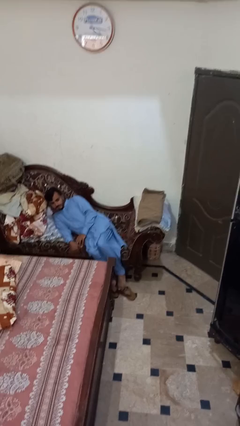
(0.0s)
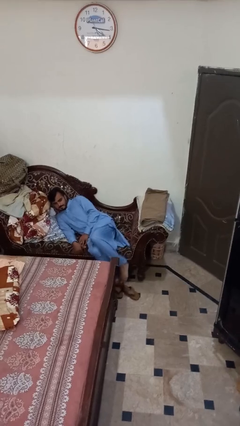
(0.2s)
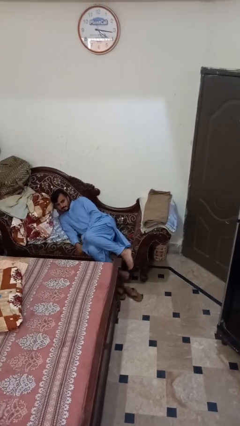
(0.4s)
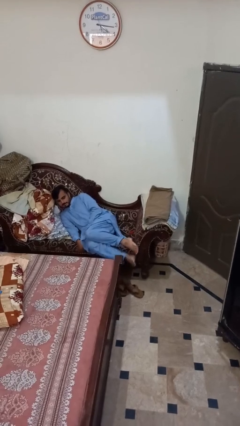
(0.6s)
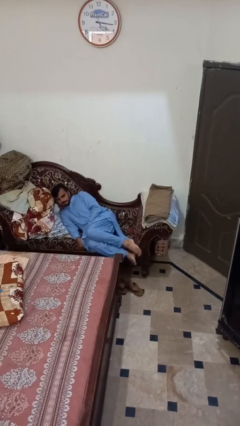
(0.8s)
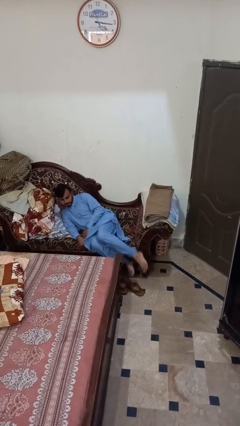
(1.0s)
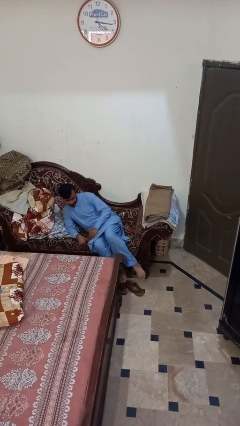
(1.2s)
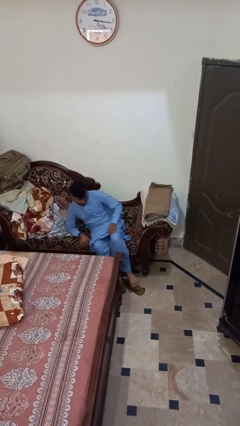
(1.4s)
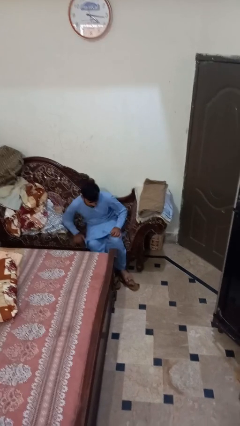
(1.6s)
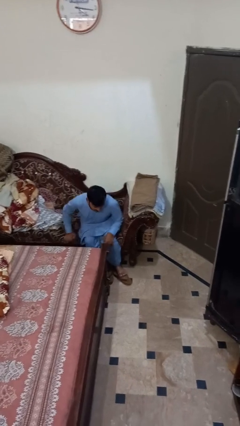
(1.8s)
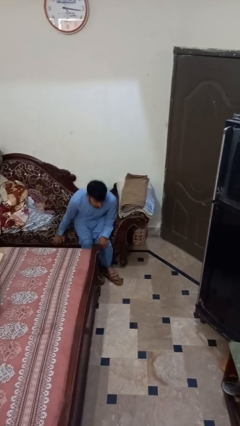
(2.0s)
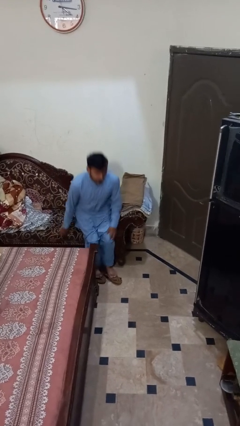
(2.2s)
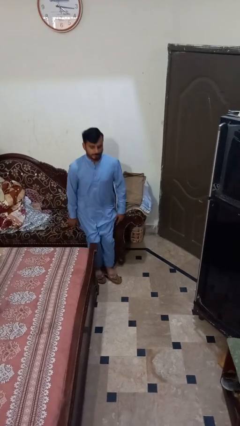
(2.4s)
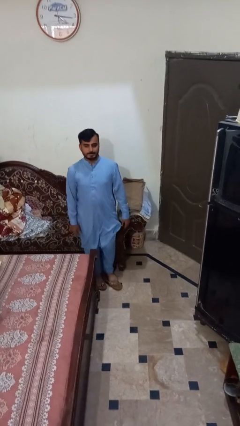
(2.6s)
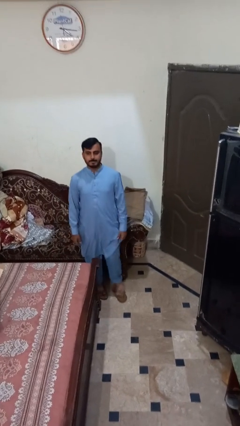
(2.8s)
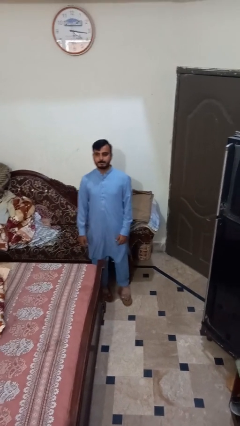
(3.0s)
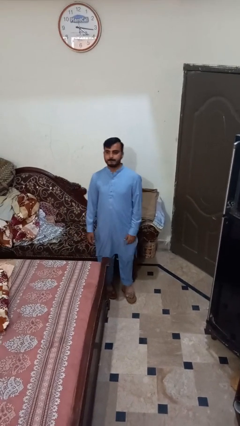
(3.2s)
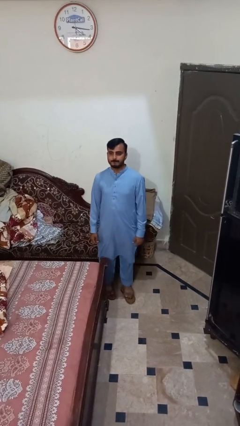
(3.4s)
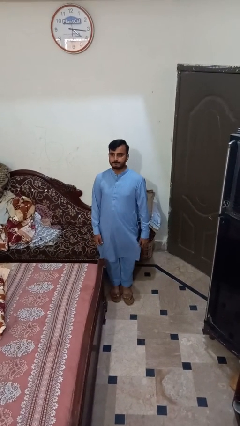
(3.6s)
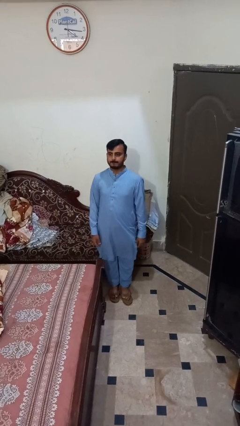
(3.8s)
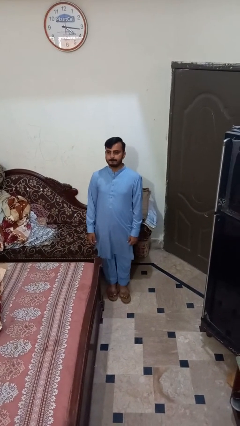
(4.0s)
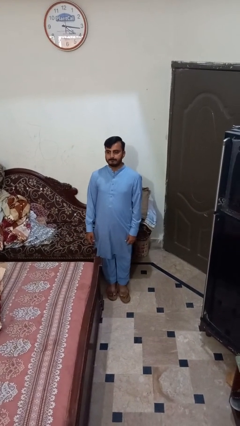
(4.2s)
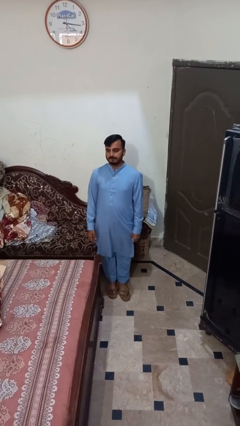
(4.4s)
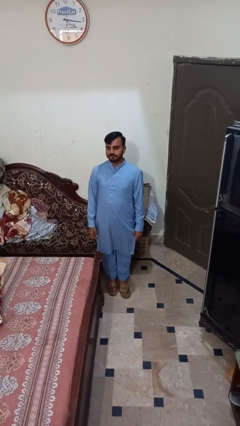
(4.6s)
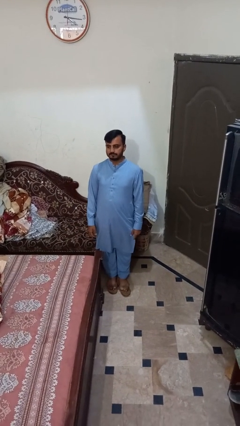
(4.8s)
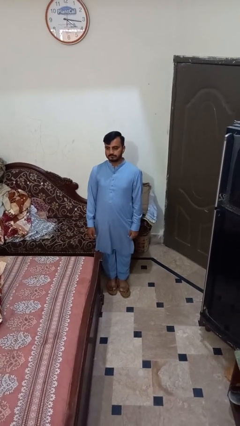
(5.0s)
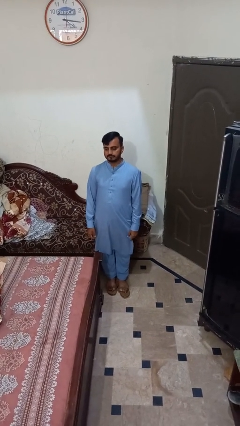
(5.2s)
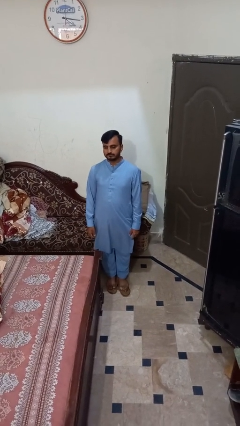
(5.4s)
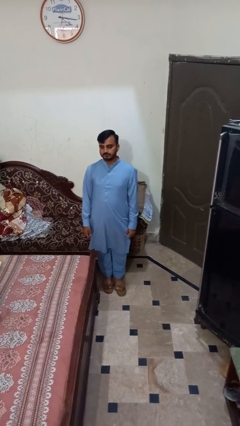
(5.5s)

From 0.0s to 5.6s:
person stands up

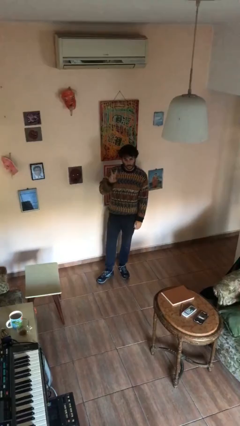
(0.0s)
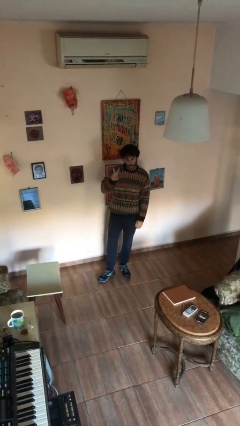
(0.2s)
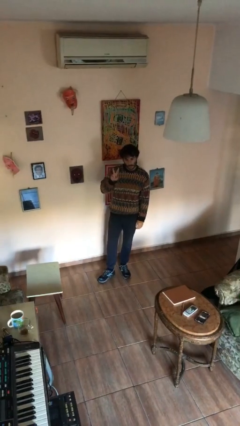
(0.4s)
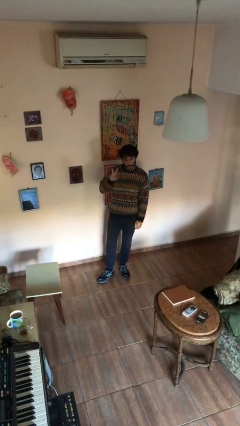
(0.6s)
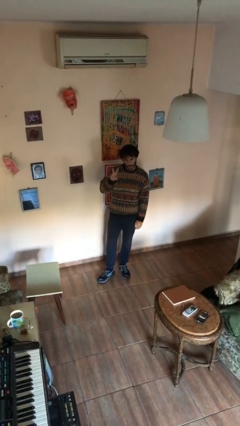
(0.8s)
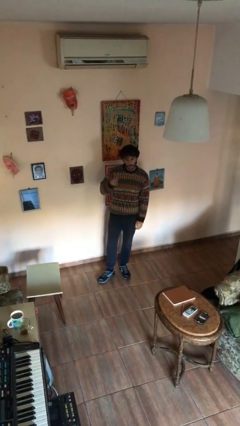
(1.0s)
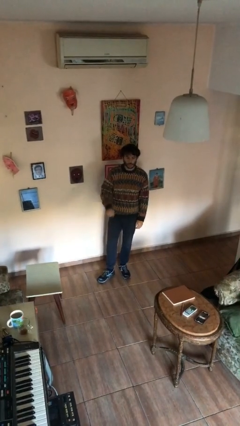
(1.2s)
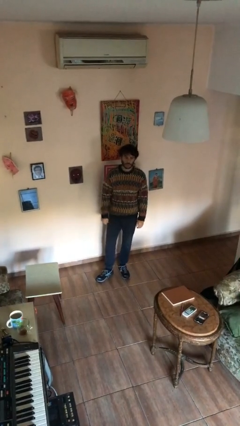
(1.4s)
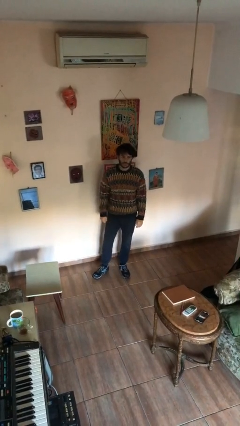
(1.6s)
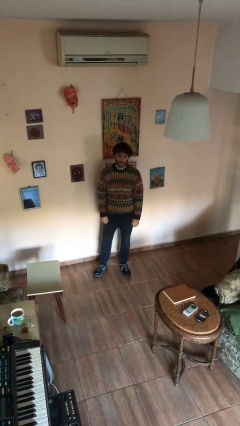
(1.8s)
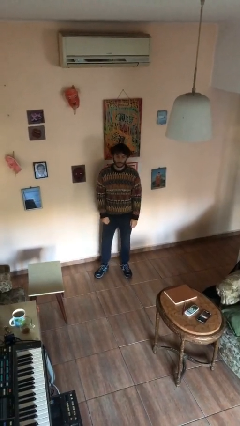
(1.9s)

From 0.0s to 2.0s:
person gestures peace

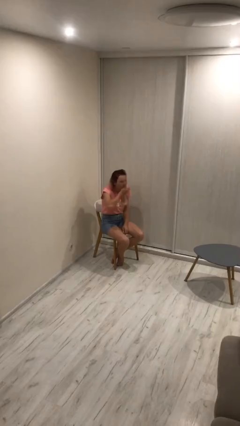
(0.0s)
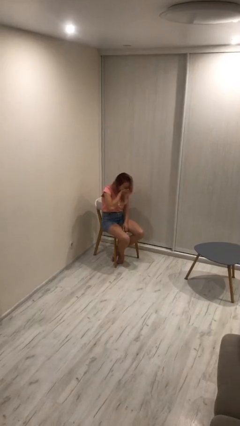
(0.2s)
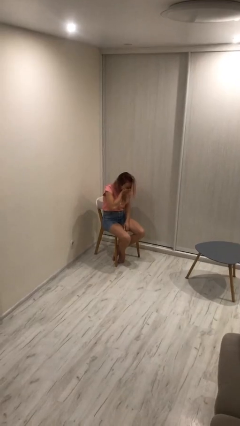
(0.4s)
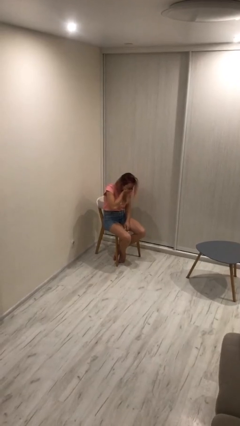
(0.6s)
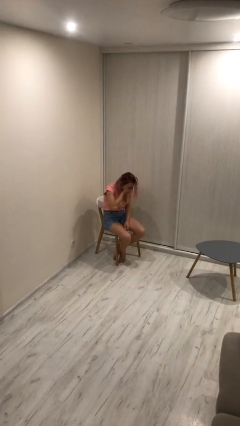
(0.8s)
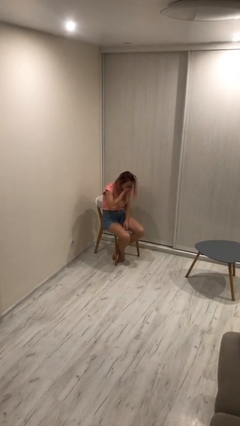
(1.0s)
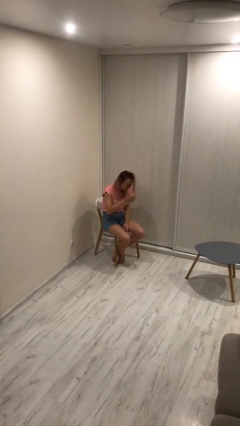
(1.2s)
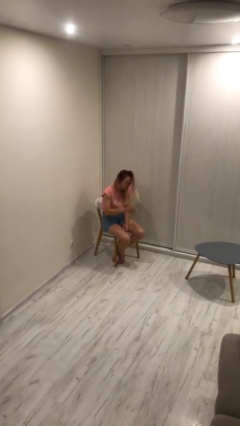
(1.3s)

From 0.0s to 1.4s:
person sneezes into arm

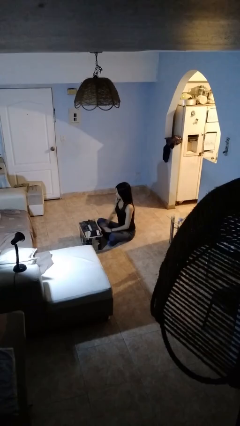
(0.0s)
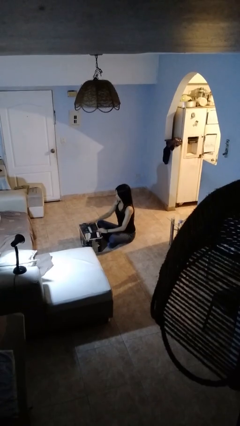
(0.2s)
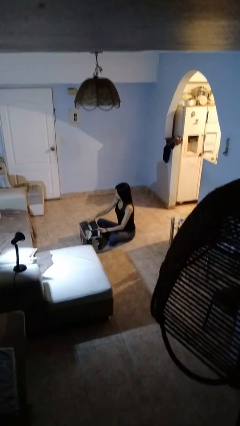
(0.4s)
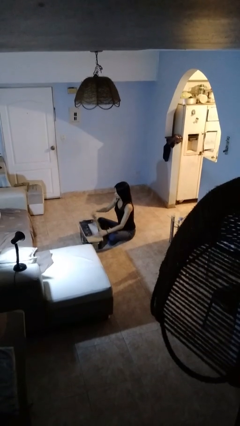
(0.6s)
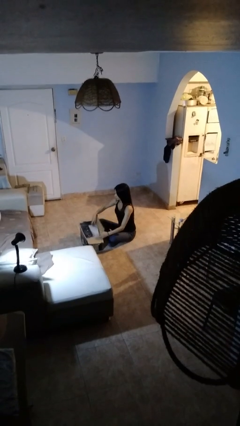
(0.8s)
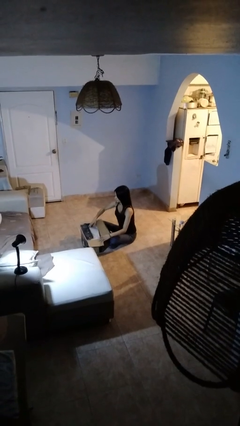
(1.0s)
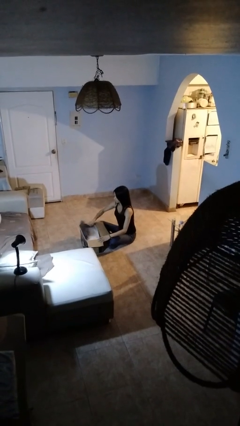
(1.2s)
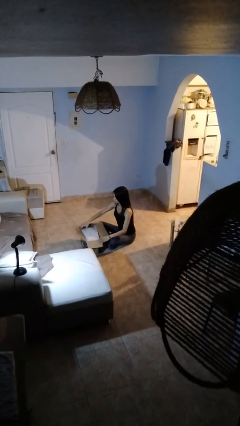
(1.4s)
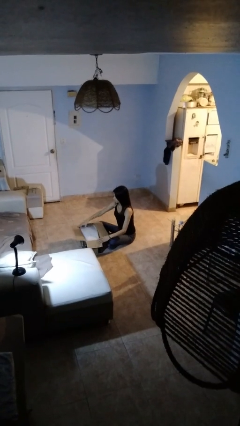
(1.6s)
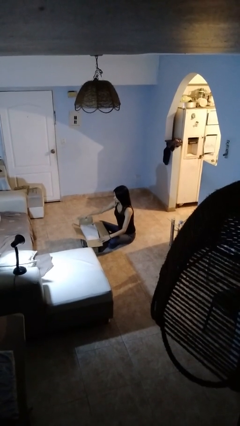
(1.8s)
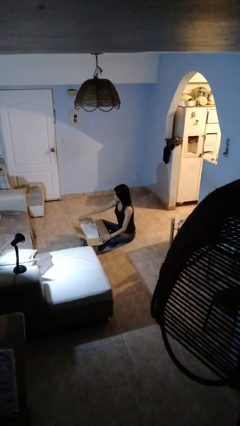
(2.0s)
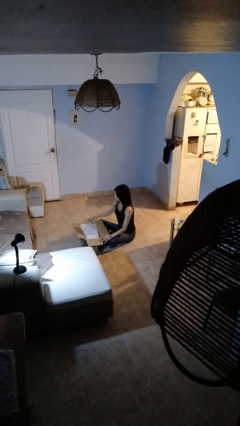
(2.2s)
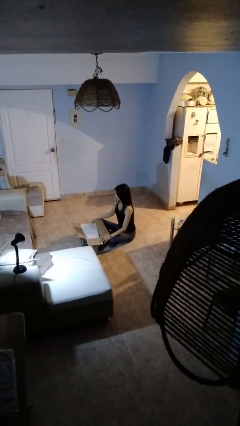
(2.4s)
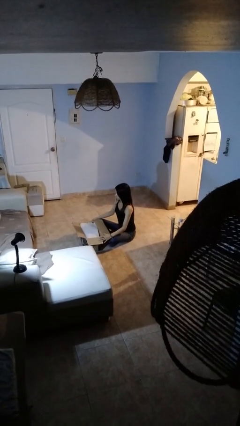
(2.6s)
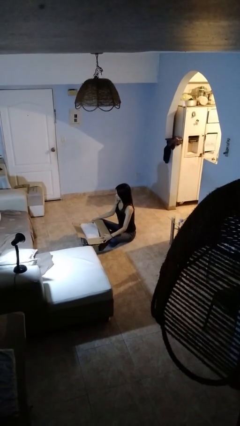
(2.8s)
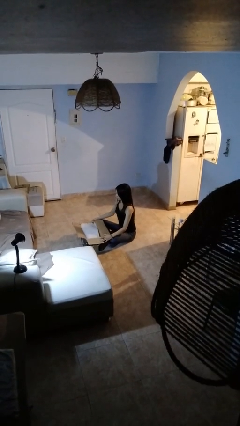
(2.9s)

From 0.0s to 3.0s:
person opens box

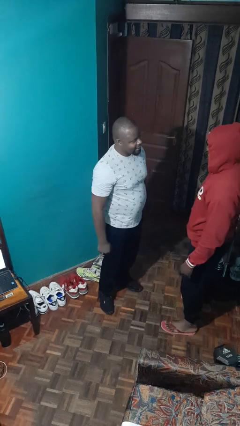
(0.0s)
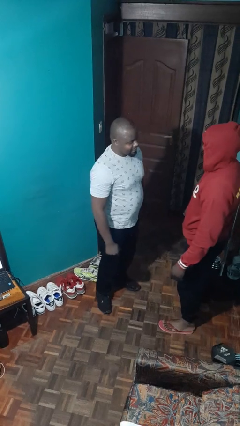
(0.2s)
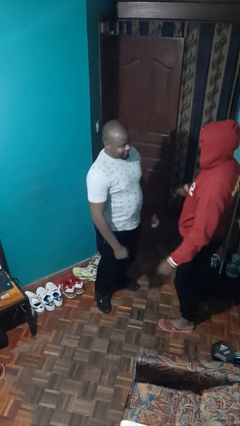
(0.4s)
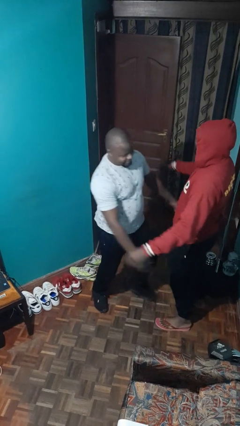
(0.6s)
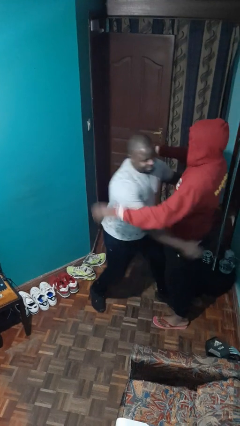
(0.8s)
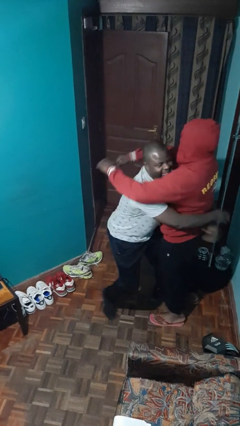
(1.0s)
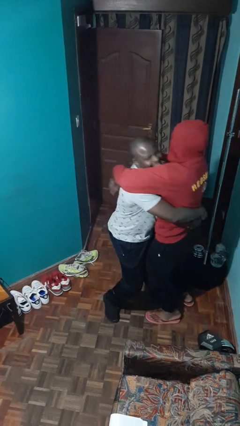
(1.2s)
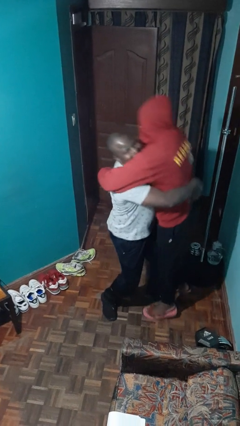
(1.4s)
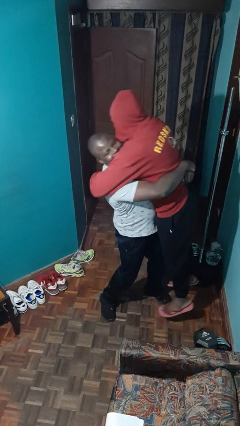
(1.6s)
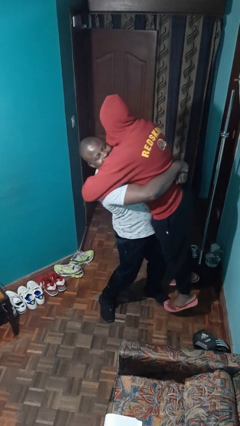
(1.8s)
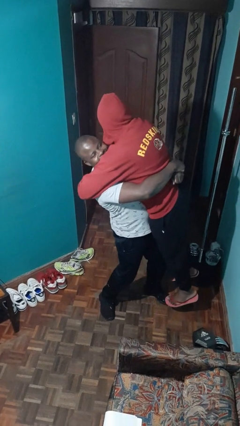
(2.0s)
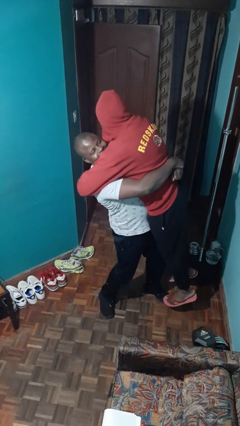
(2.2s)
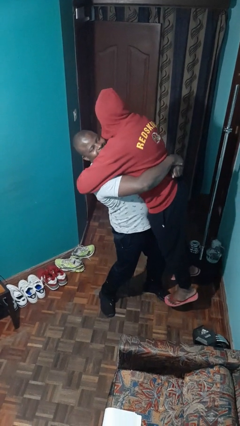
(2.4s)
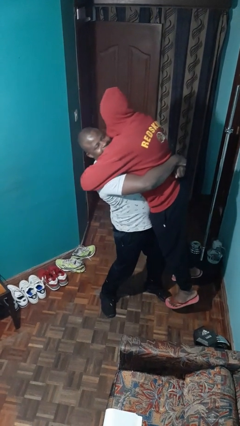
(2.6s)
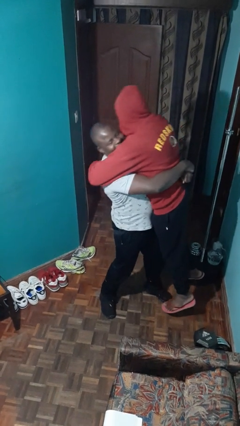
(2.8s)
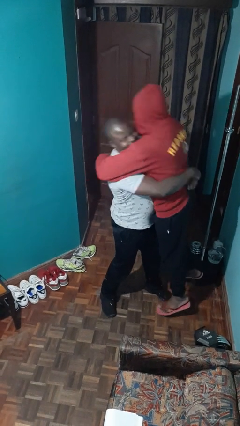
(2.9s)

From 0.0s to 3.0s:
person picks up person

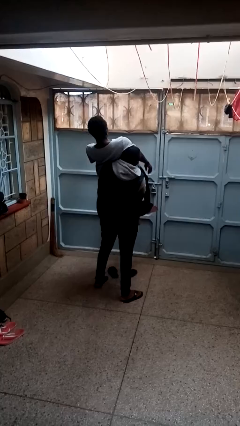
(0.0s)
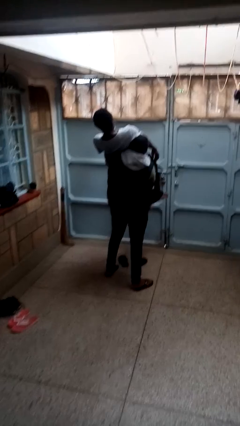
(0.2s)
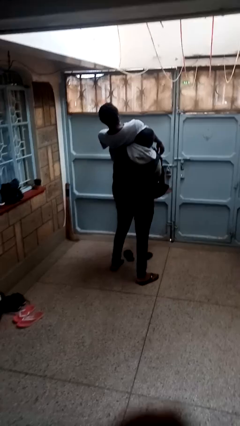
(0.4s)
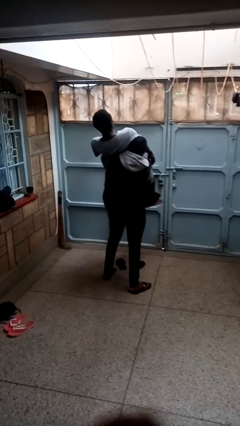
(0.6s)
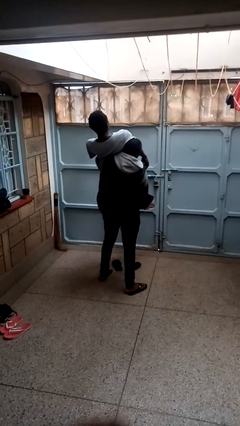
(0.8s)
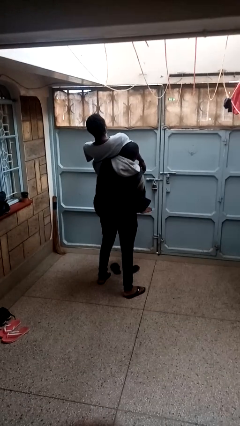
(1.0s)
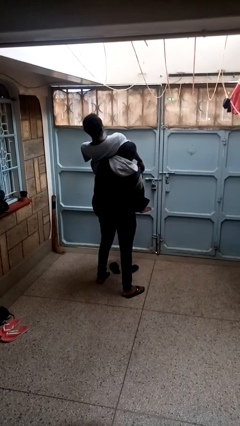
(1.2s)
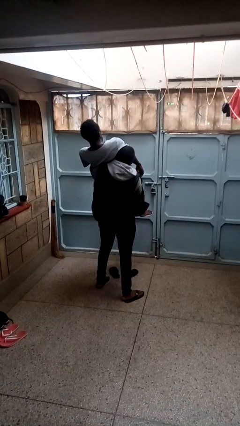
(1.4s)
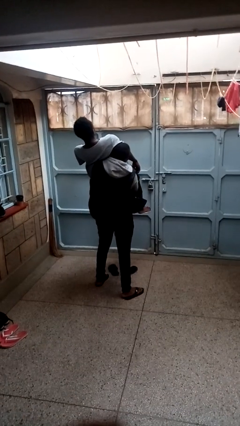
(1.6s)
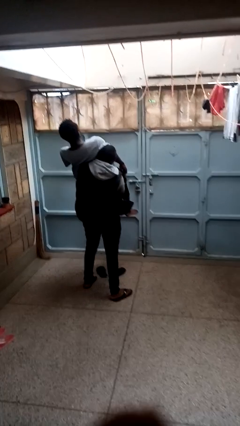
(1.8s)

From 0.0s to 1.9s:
person carries person over shoulder

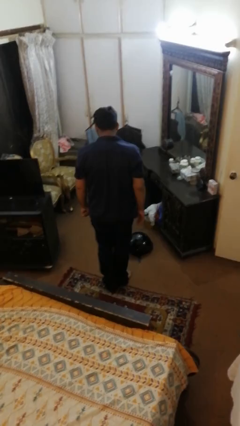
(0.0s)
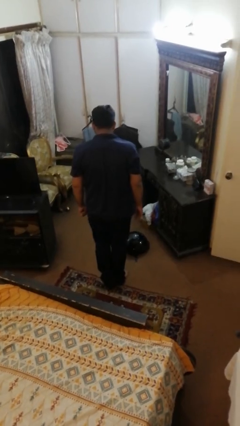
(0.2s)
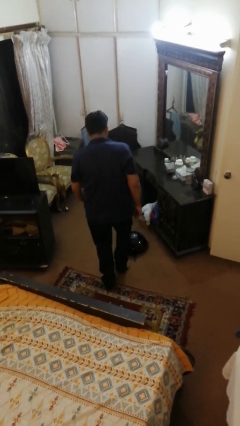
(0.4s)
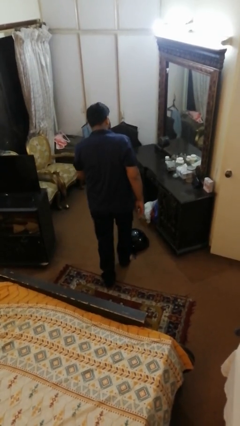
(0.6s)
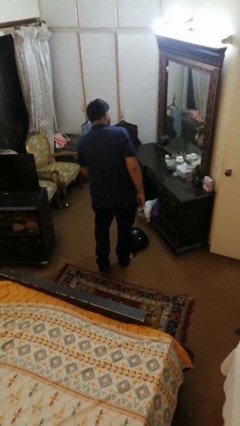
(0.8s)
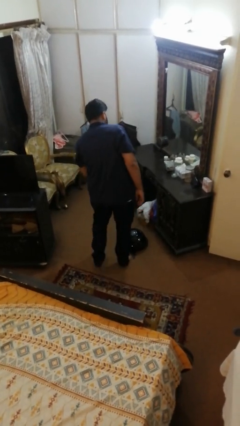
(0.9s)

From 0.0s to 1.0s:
person trips on object on floor
